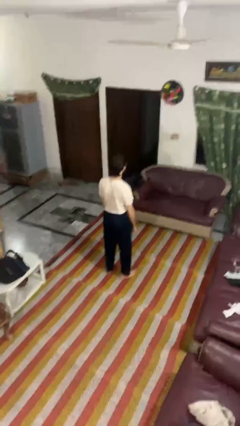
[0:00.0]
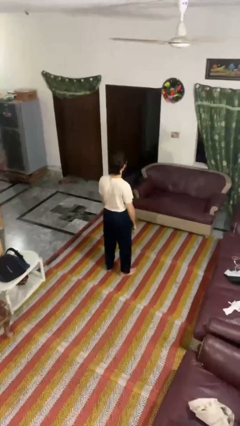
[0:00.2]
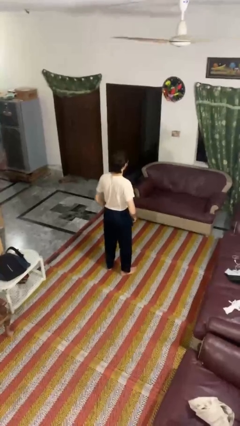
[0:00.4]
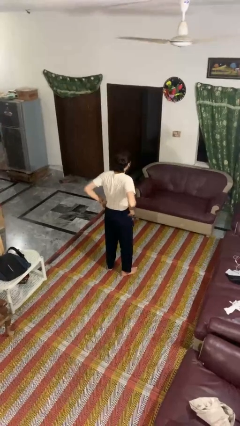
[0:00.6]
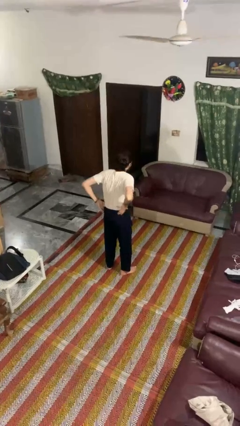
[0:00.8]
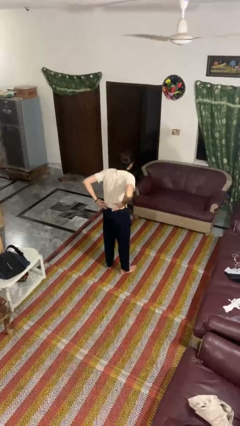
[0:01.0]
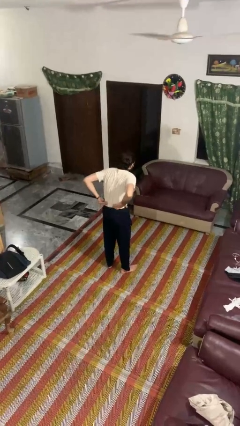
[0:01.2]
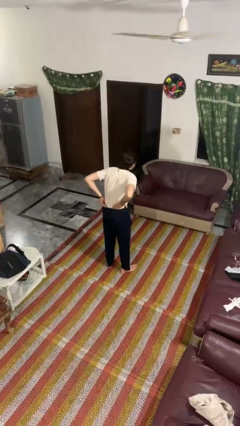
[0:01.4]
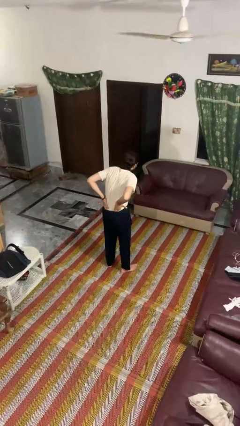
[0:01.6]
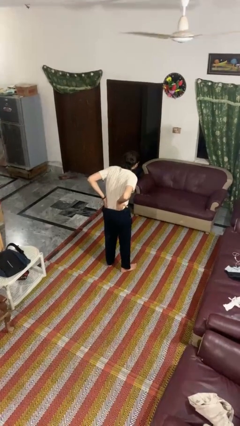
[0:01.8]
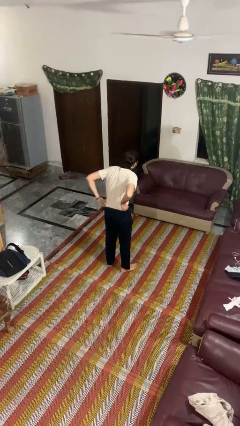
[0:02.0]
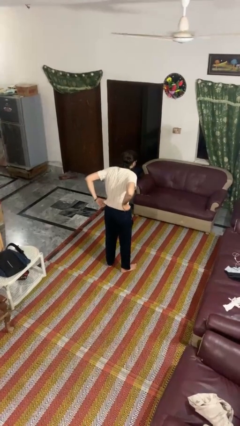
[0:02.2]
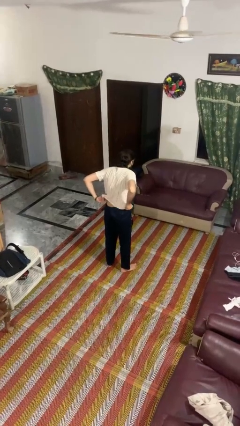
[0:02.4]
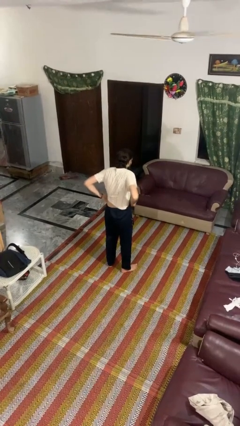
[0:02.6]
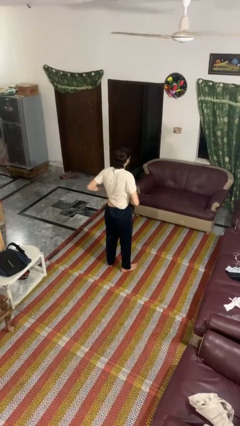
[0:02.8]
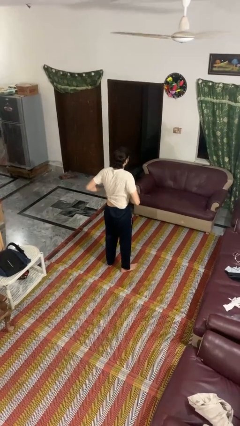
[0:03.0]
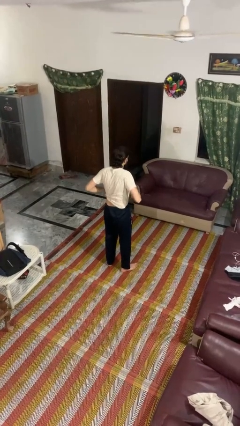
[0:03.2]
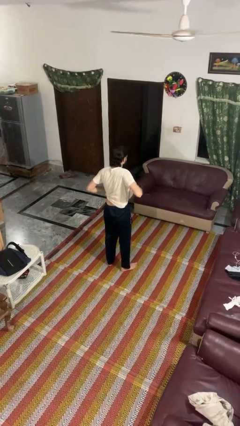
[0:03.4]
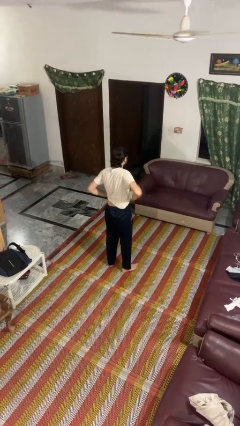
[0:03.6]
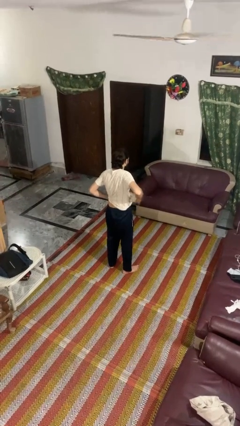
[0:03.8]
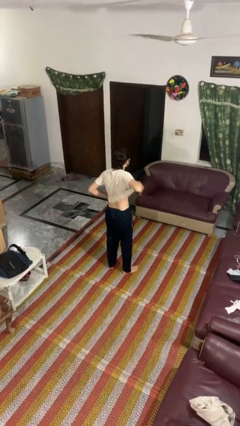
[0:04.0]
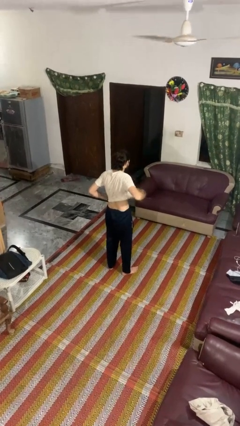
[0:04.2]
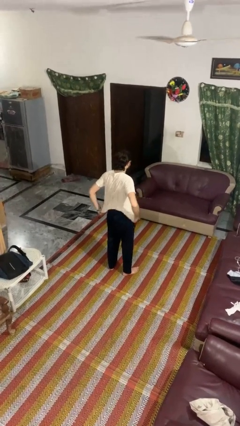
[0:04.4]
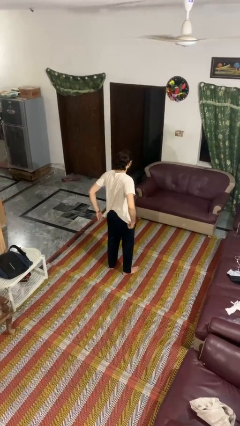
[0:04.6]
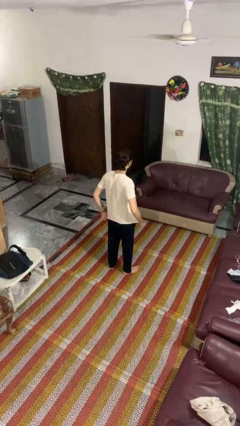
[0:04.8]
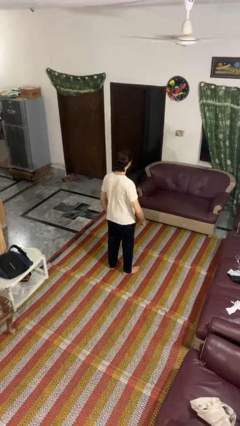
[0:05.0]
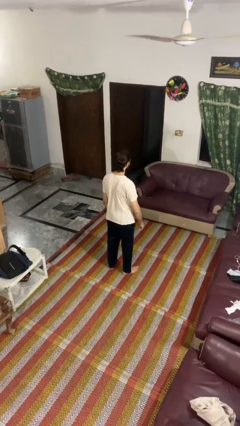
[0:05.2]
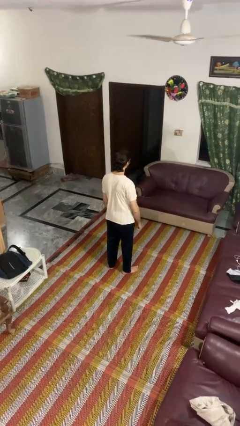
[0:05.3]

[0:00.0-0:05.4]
person untucks shirt

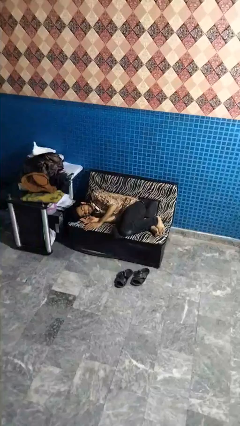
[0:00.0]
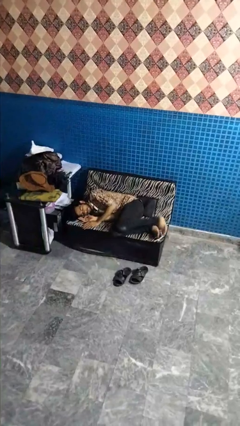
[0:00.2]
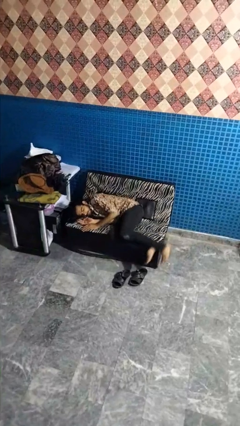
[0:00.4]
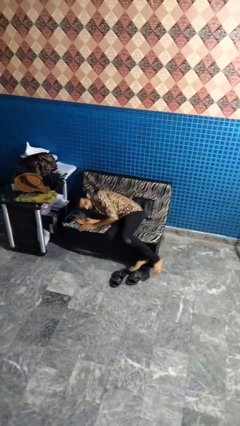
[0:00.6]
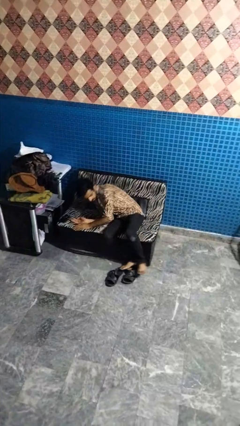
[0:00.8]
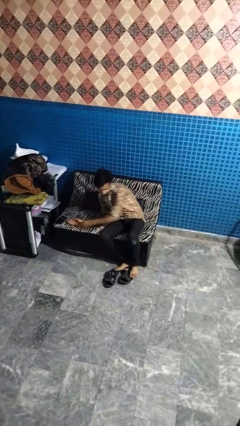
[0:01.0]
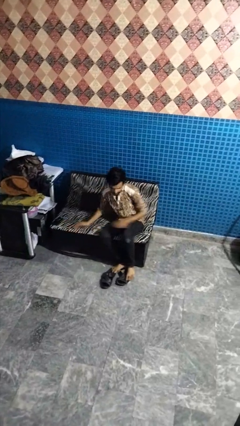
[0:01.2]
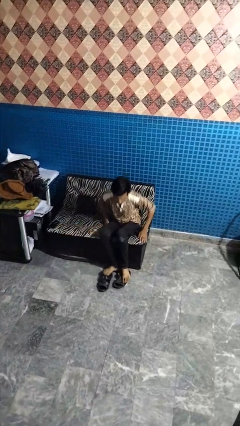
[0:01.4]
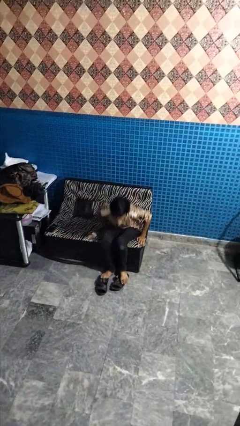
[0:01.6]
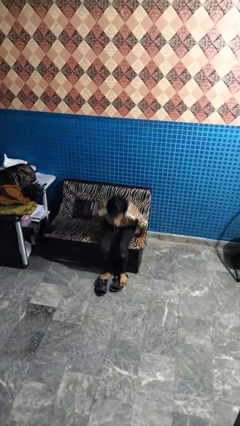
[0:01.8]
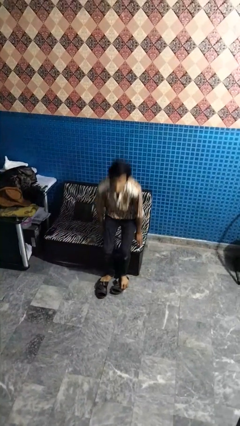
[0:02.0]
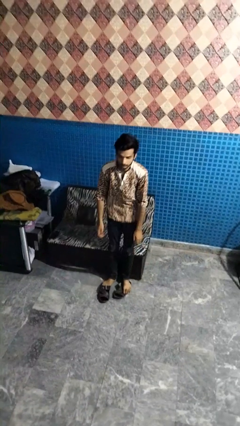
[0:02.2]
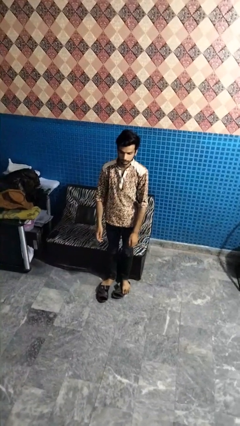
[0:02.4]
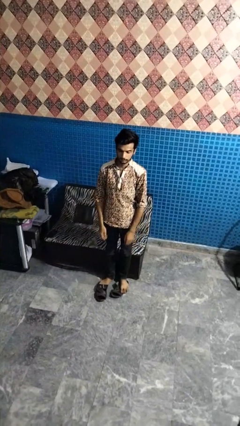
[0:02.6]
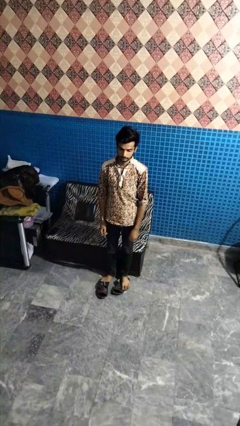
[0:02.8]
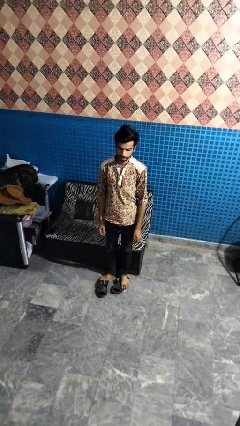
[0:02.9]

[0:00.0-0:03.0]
person stands up

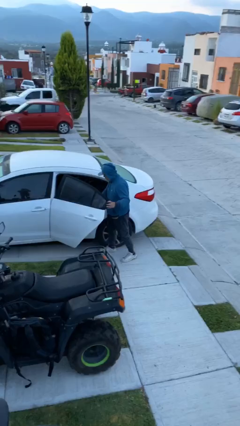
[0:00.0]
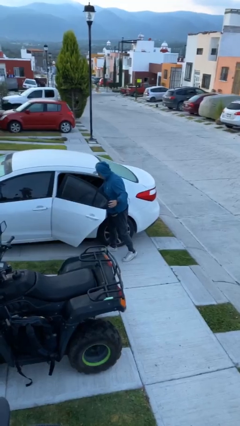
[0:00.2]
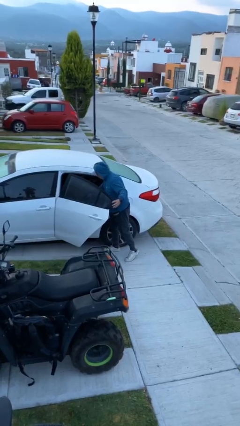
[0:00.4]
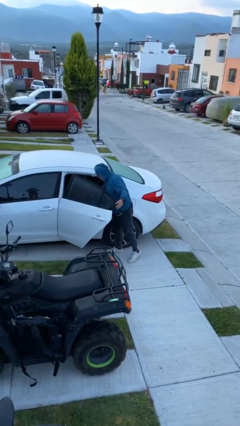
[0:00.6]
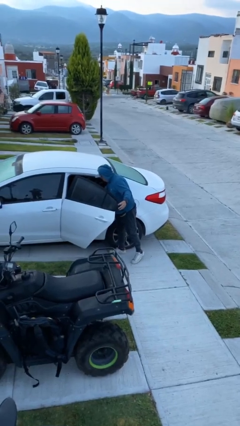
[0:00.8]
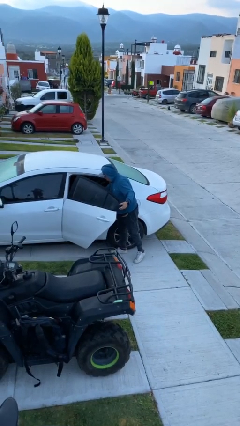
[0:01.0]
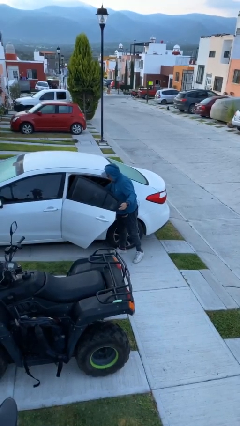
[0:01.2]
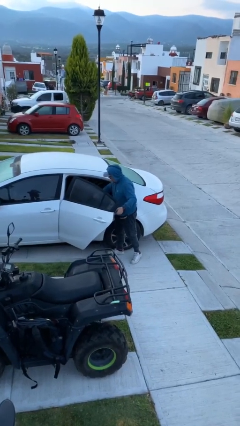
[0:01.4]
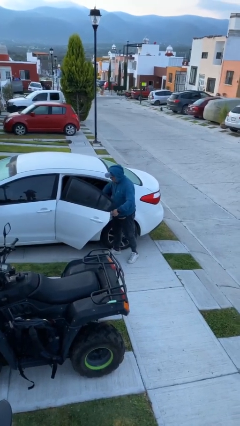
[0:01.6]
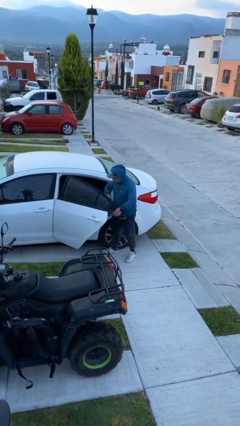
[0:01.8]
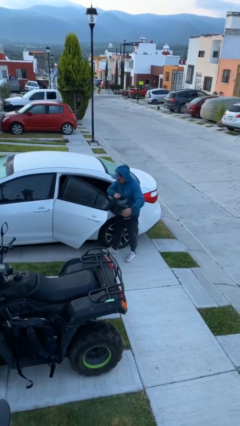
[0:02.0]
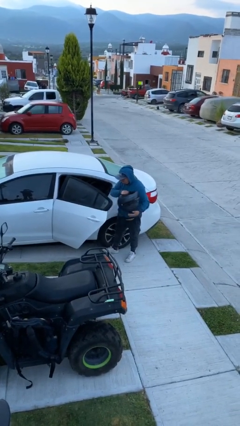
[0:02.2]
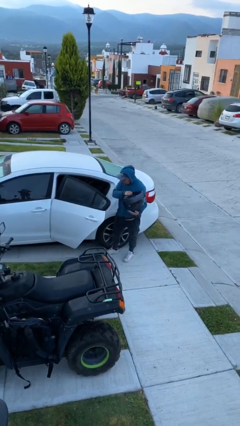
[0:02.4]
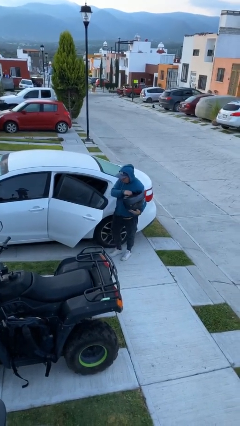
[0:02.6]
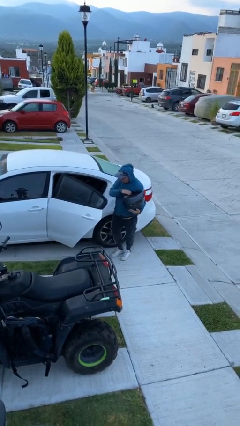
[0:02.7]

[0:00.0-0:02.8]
person unloads car

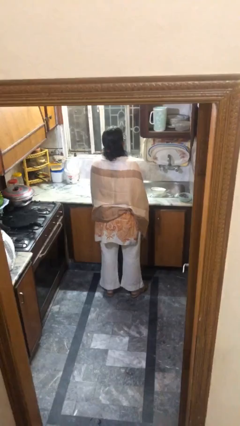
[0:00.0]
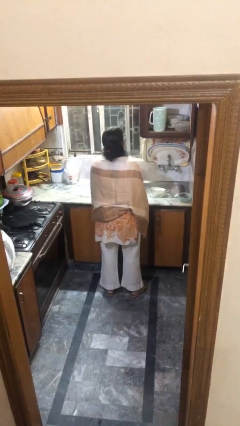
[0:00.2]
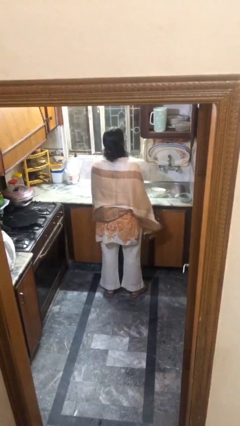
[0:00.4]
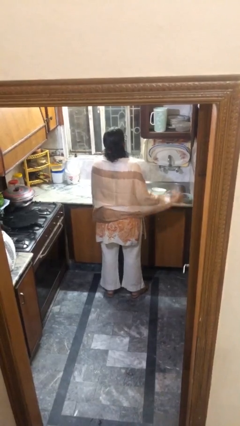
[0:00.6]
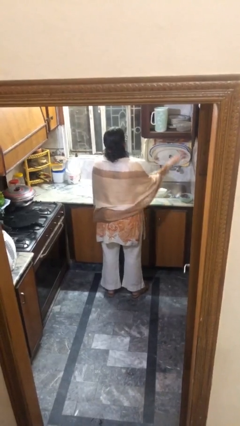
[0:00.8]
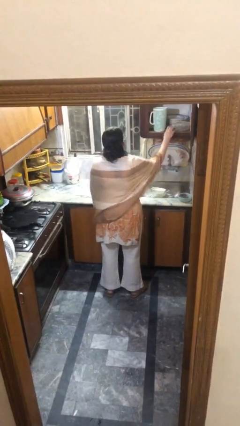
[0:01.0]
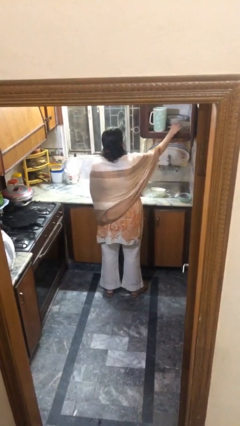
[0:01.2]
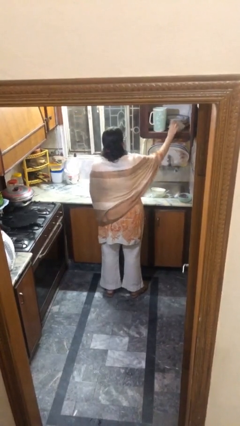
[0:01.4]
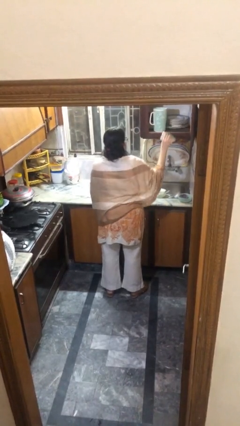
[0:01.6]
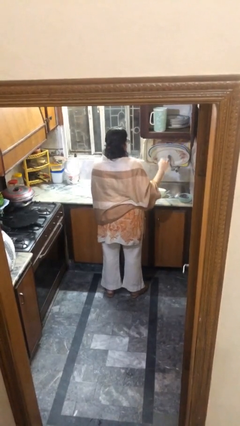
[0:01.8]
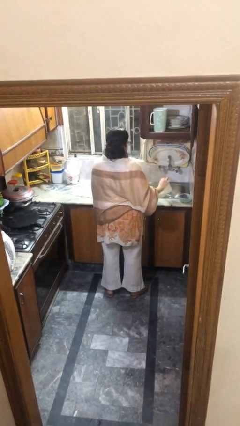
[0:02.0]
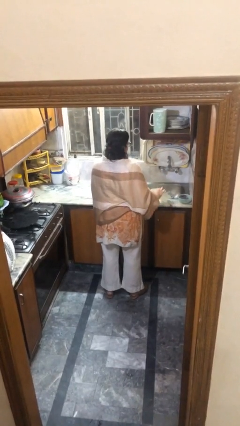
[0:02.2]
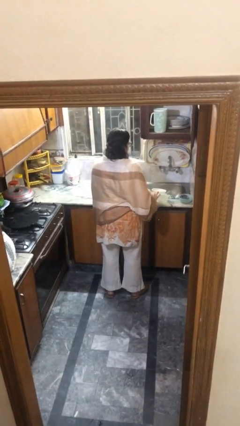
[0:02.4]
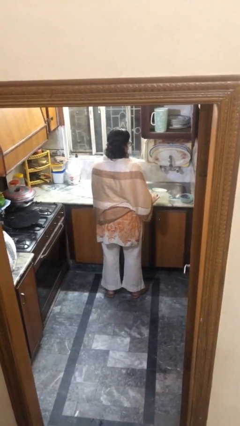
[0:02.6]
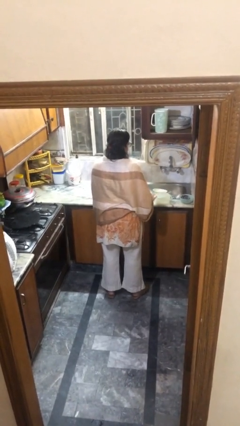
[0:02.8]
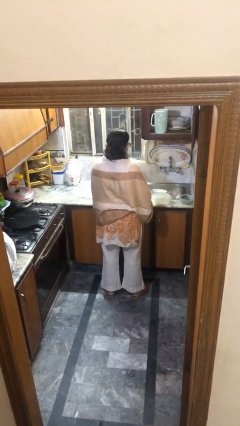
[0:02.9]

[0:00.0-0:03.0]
person takes object from kitchen drawer

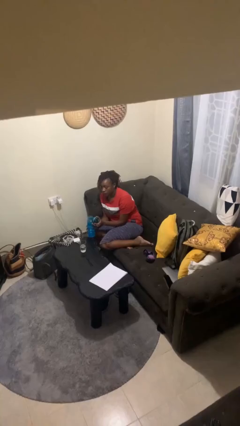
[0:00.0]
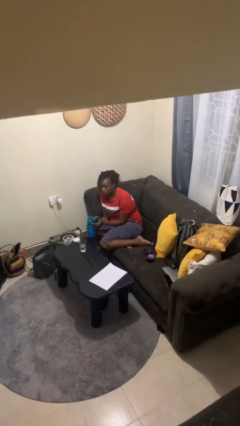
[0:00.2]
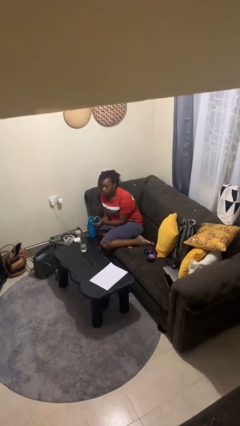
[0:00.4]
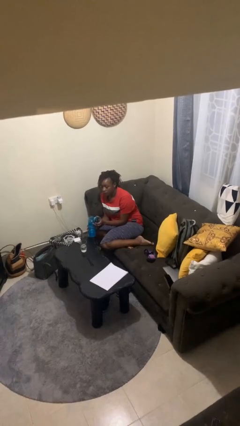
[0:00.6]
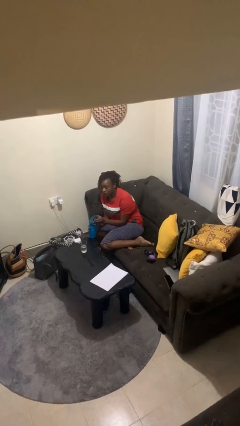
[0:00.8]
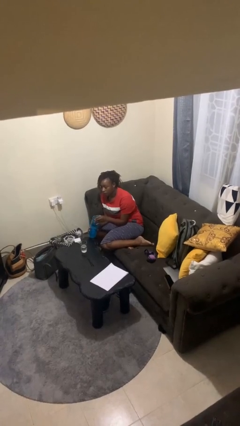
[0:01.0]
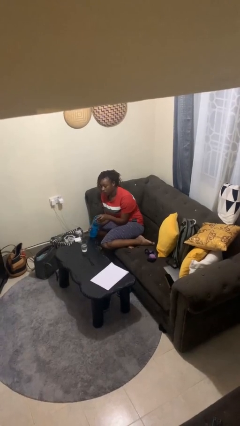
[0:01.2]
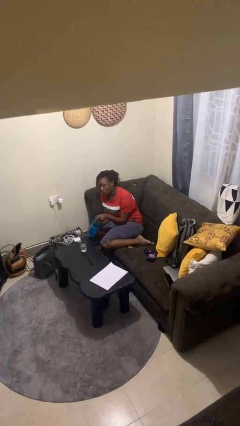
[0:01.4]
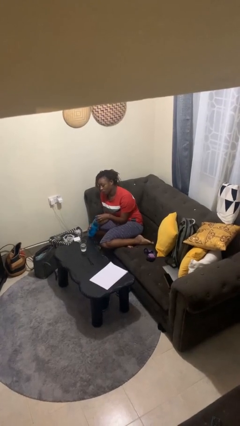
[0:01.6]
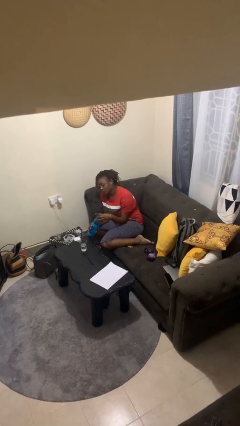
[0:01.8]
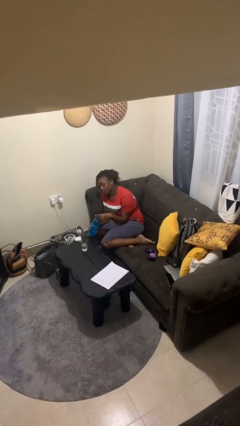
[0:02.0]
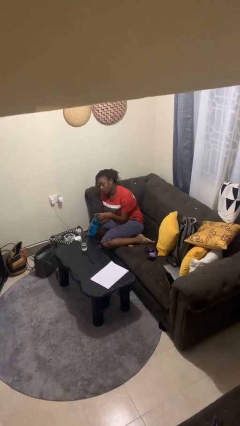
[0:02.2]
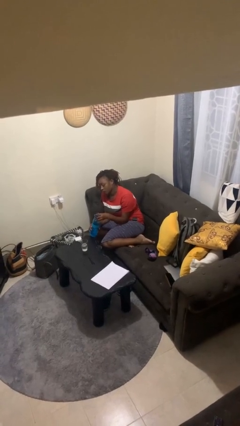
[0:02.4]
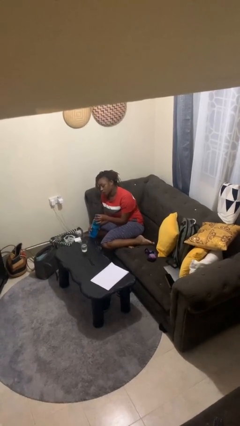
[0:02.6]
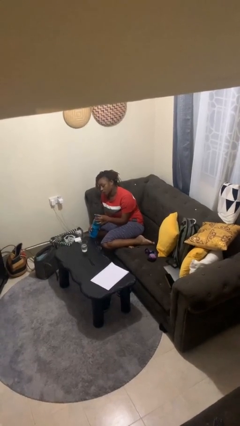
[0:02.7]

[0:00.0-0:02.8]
person screws lid to bottle

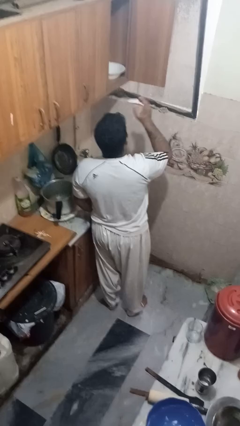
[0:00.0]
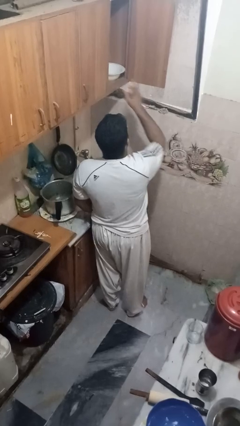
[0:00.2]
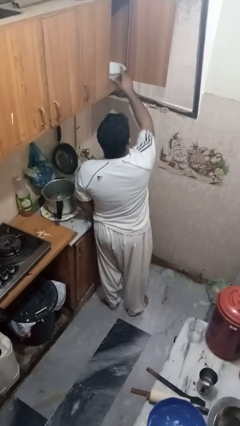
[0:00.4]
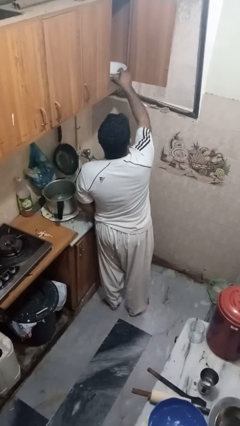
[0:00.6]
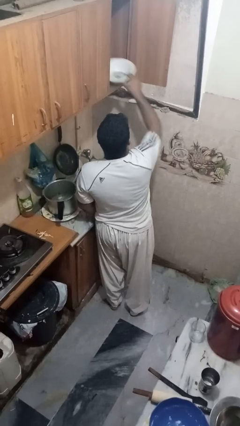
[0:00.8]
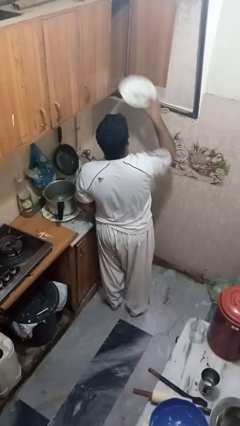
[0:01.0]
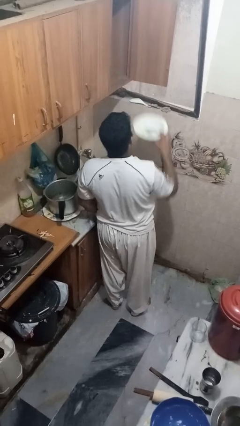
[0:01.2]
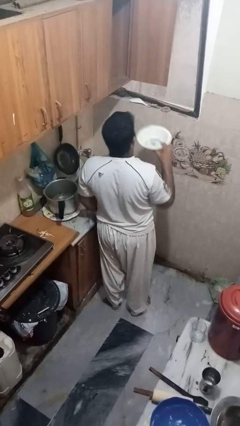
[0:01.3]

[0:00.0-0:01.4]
person takes object from cabinet
